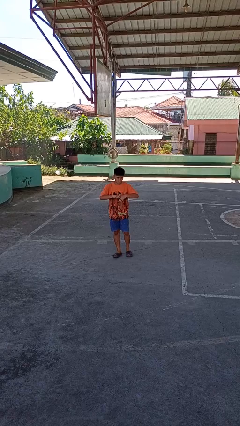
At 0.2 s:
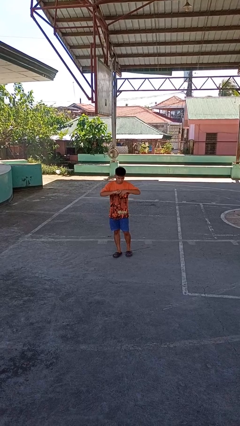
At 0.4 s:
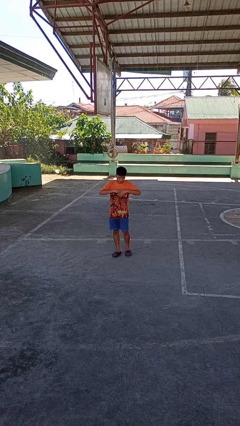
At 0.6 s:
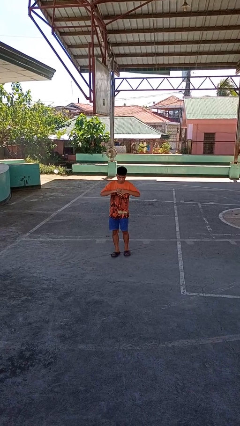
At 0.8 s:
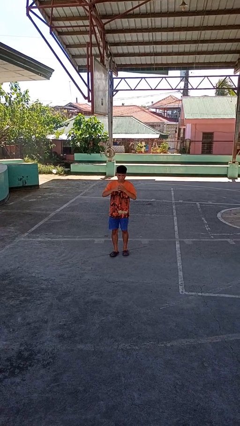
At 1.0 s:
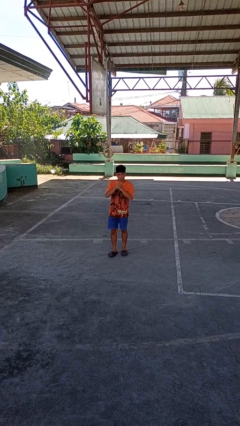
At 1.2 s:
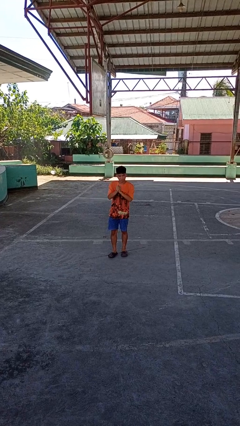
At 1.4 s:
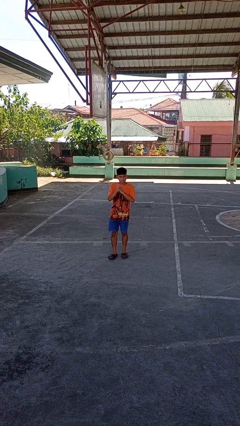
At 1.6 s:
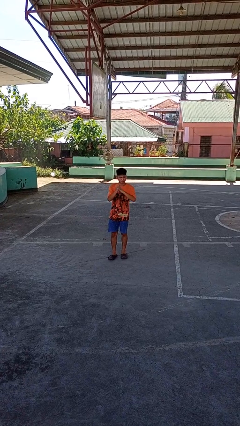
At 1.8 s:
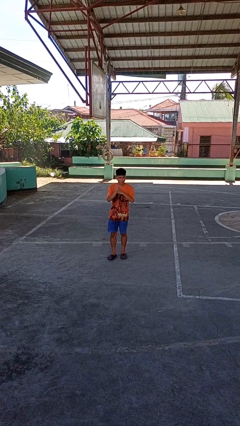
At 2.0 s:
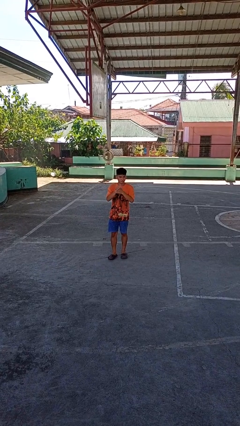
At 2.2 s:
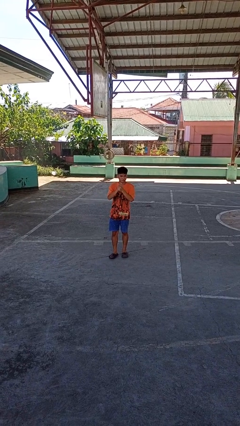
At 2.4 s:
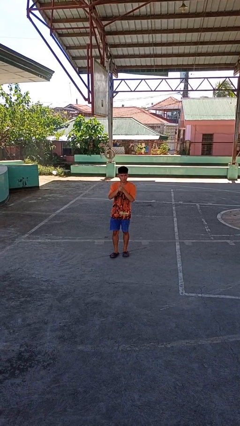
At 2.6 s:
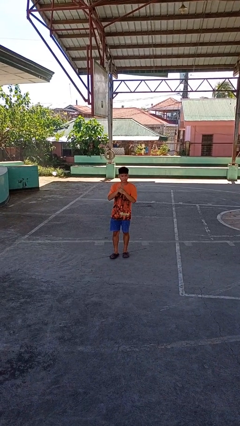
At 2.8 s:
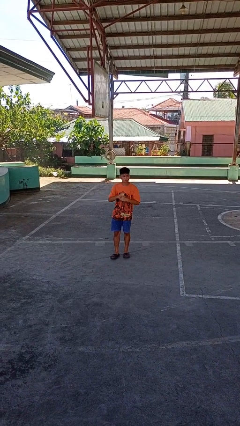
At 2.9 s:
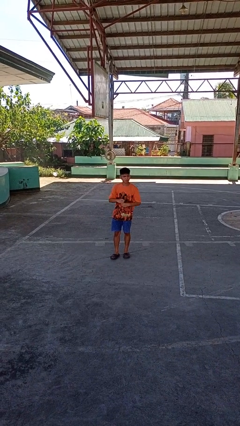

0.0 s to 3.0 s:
person cracks knuckles

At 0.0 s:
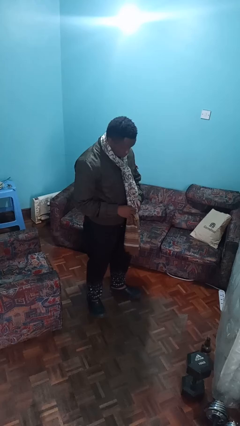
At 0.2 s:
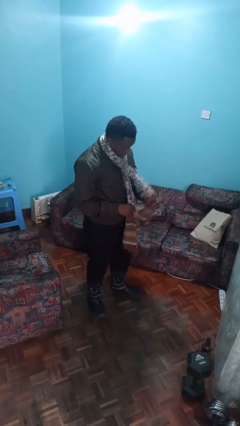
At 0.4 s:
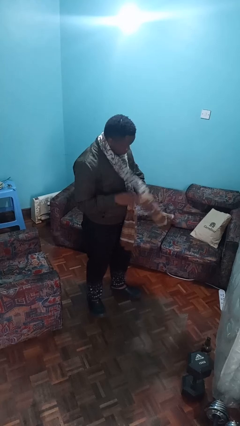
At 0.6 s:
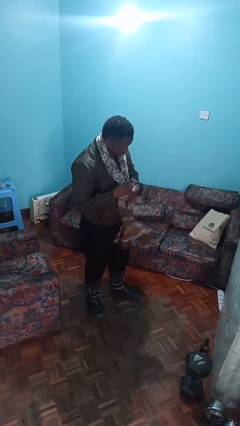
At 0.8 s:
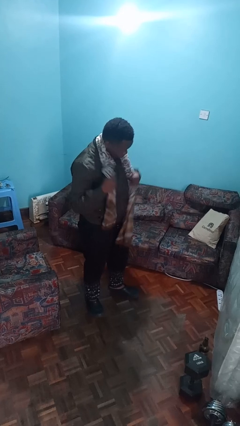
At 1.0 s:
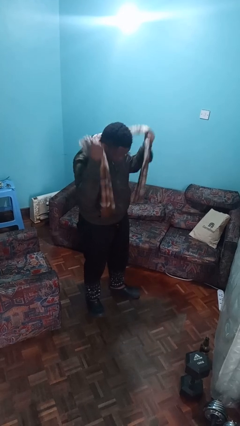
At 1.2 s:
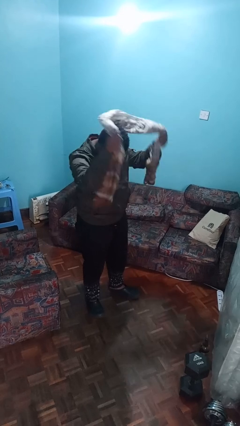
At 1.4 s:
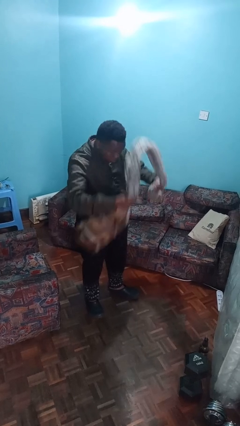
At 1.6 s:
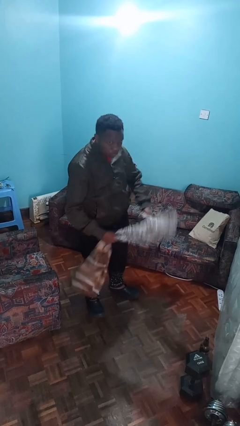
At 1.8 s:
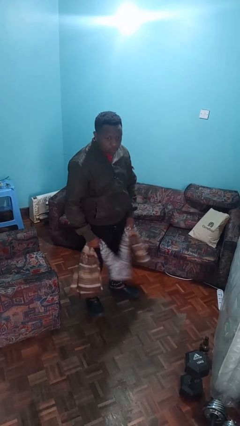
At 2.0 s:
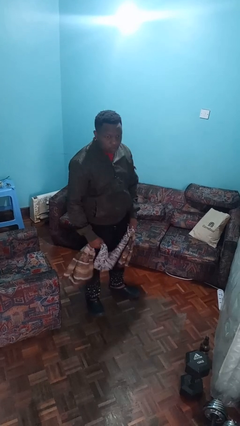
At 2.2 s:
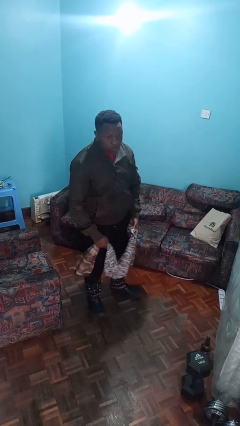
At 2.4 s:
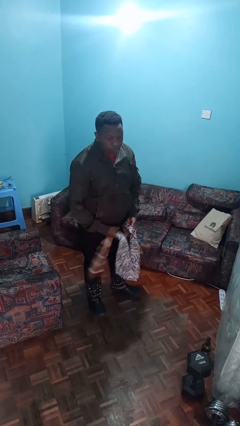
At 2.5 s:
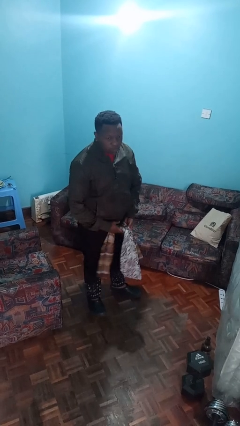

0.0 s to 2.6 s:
person takes off scarf

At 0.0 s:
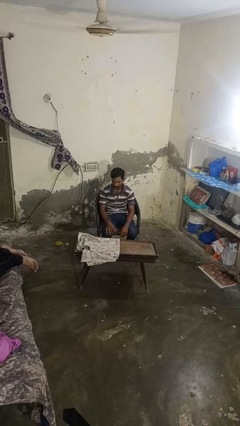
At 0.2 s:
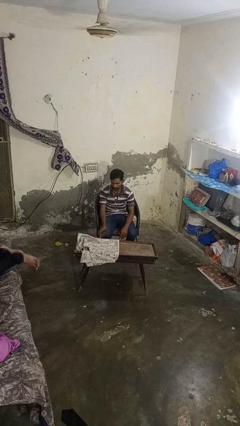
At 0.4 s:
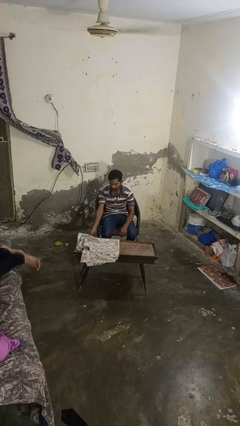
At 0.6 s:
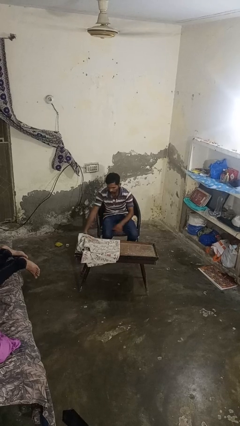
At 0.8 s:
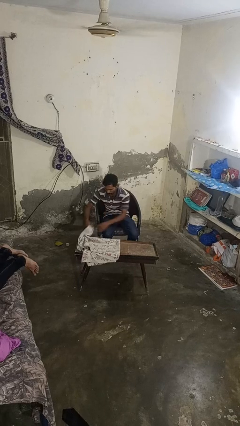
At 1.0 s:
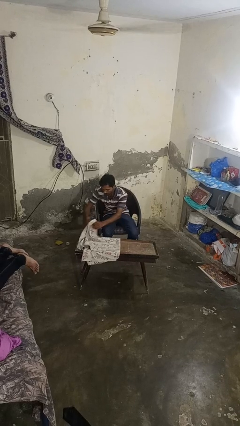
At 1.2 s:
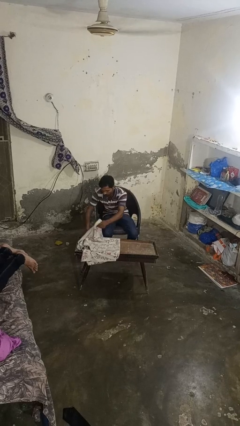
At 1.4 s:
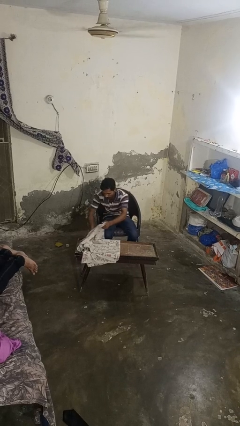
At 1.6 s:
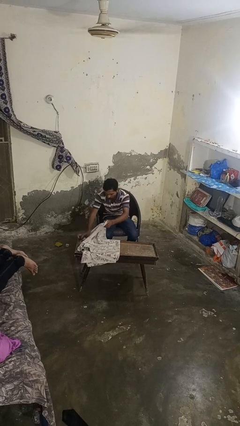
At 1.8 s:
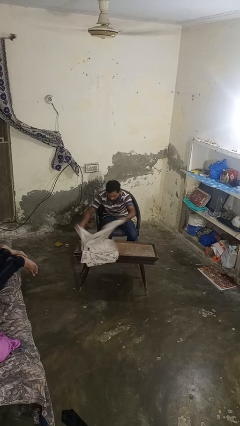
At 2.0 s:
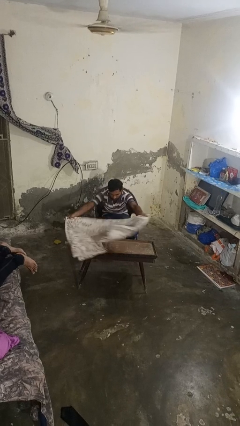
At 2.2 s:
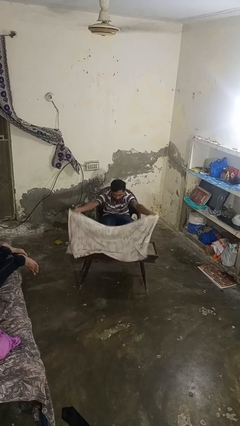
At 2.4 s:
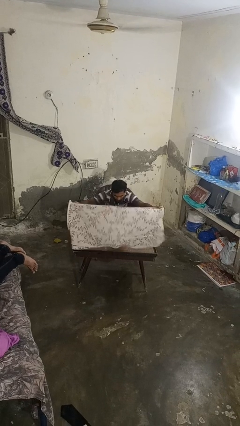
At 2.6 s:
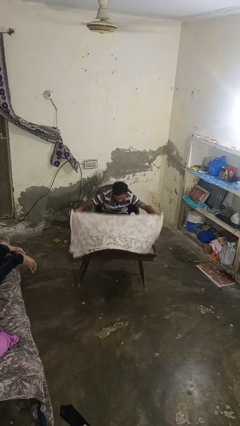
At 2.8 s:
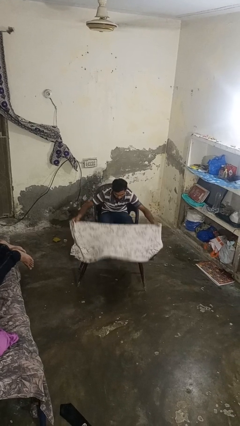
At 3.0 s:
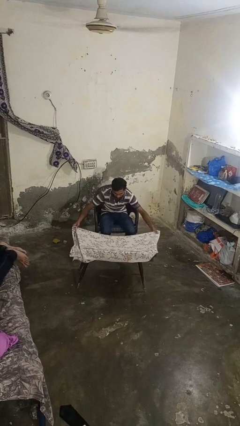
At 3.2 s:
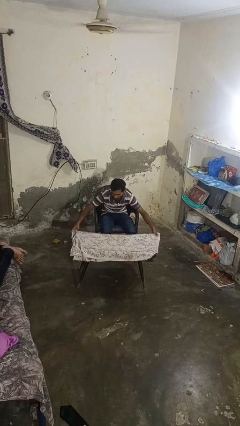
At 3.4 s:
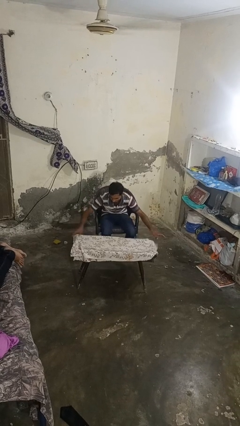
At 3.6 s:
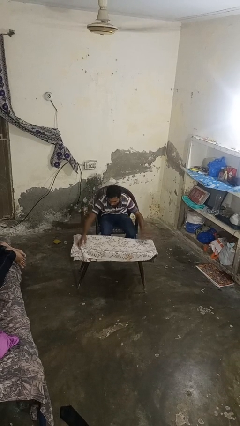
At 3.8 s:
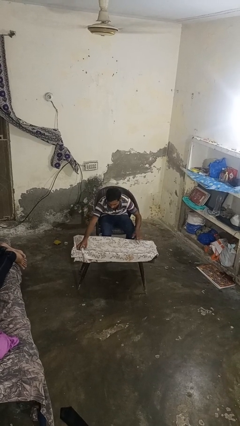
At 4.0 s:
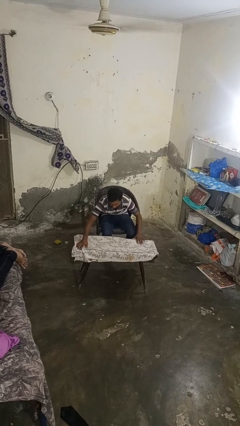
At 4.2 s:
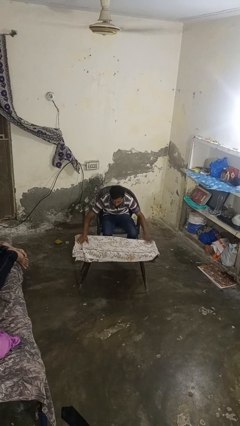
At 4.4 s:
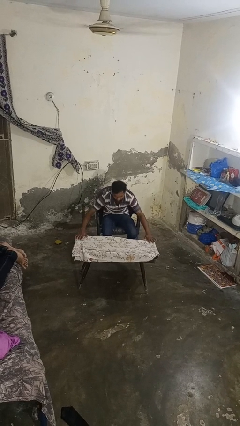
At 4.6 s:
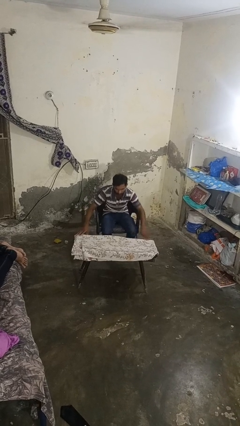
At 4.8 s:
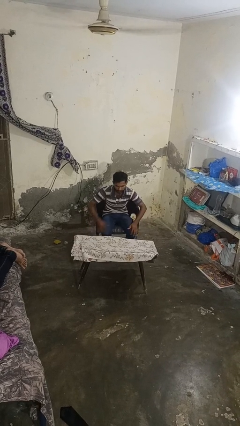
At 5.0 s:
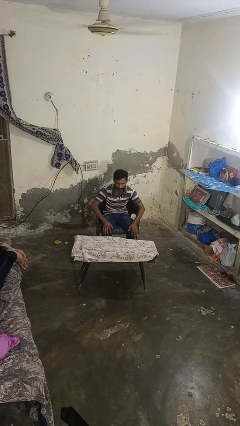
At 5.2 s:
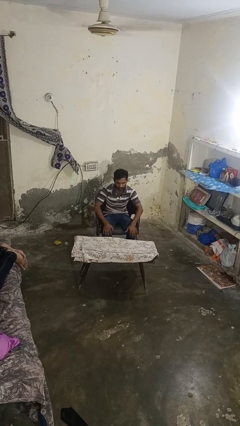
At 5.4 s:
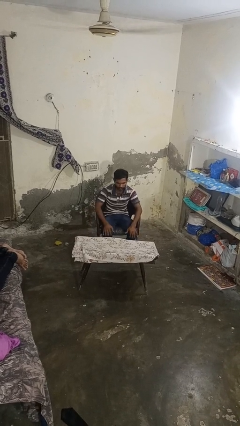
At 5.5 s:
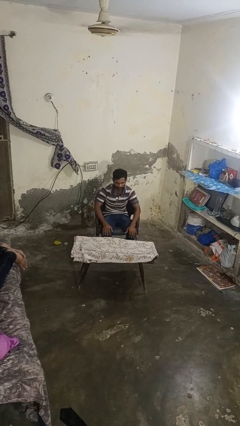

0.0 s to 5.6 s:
person spreads tablecloth

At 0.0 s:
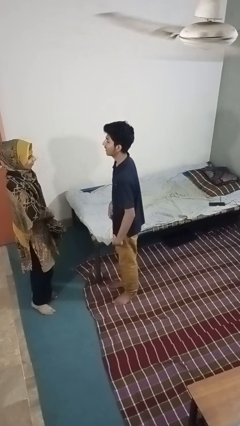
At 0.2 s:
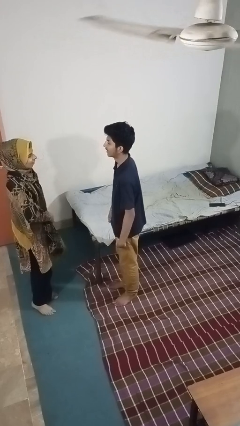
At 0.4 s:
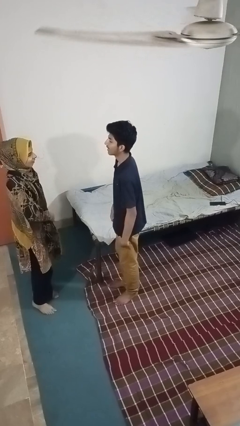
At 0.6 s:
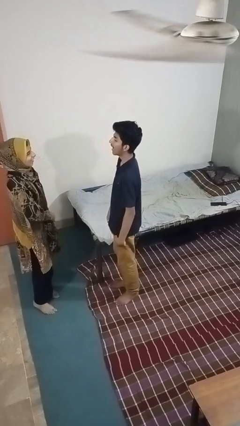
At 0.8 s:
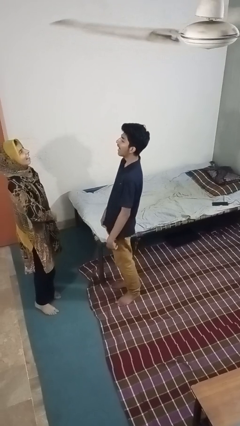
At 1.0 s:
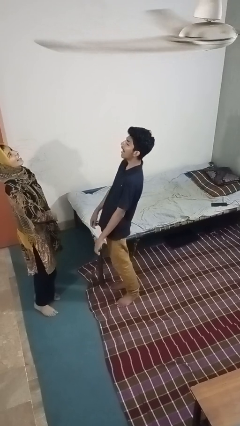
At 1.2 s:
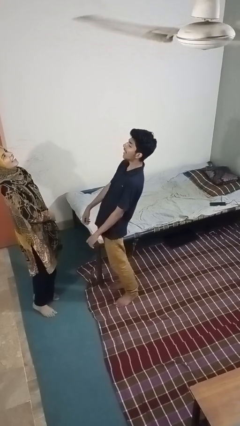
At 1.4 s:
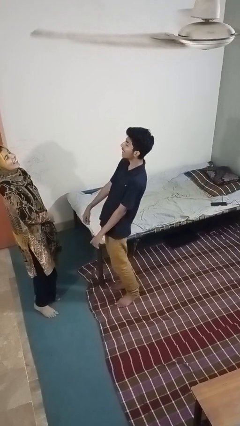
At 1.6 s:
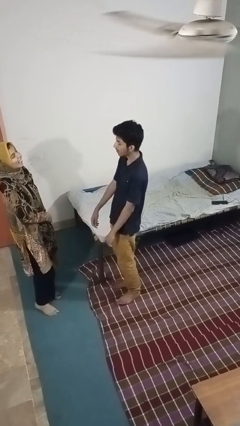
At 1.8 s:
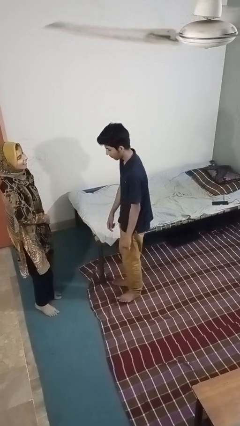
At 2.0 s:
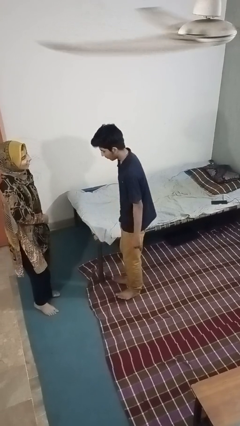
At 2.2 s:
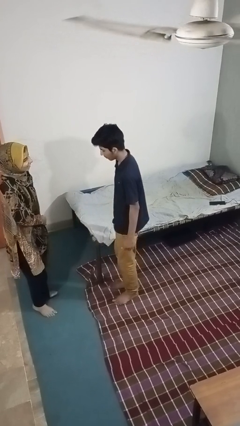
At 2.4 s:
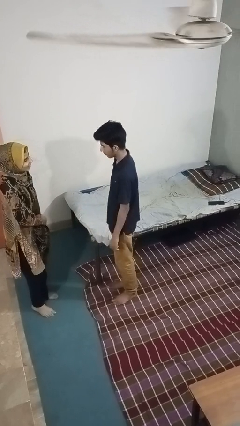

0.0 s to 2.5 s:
person laughs with person

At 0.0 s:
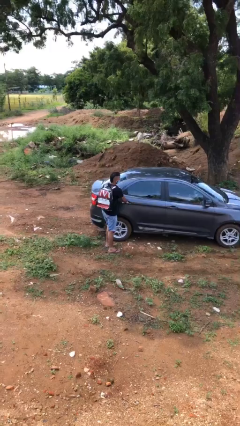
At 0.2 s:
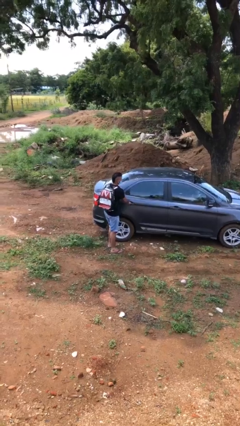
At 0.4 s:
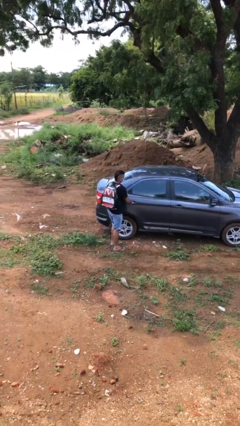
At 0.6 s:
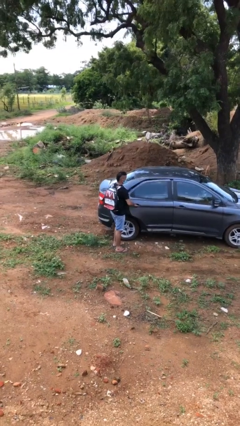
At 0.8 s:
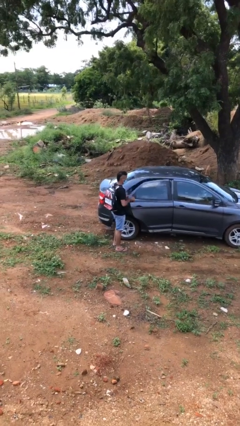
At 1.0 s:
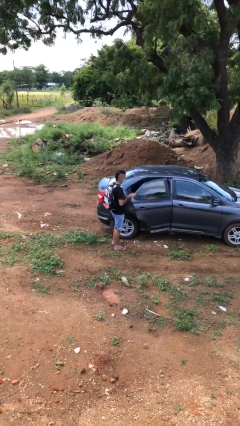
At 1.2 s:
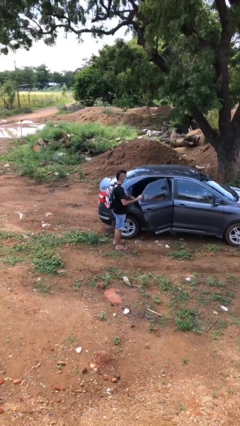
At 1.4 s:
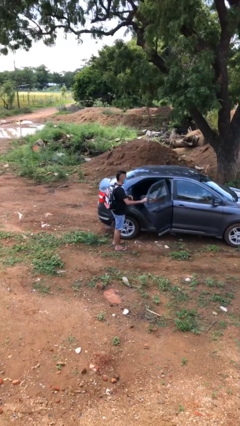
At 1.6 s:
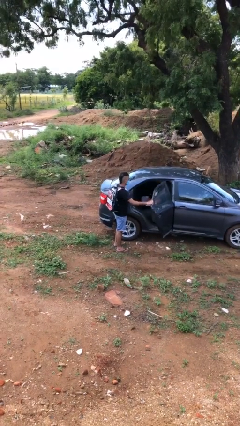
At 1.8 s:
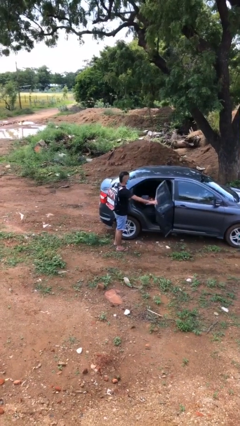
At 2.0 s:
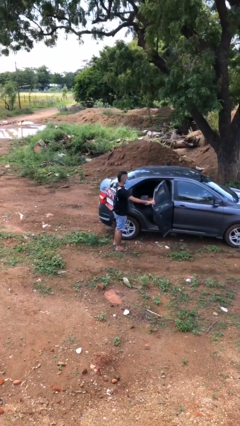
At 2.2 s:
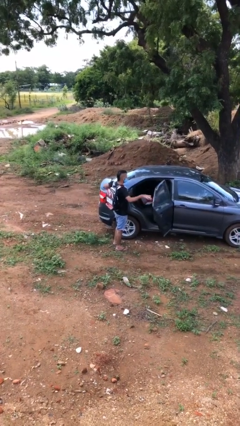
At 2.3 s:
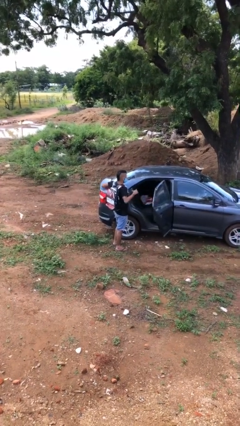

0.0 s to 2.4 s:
person opens car door

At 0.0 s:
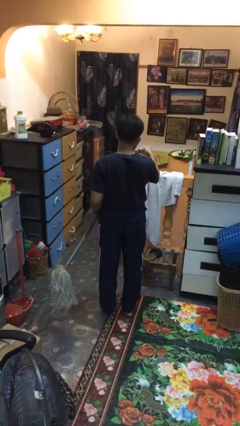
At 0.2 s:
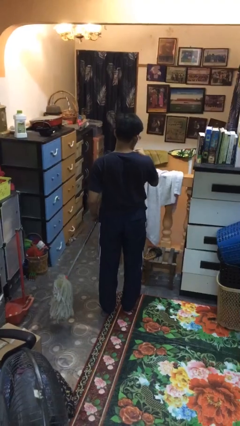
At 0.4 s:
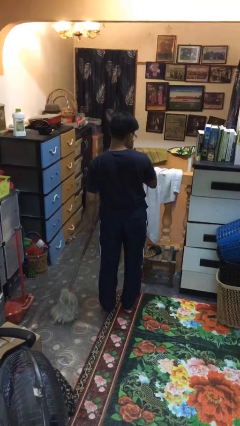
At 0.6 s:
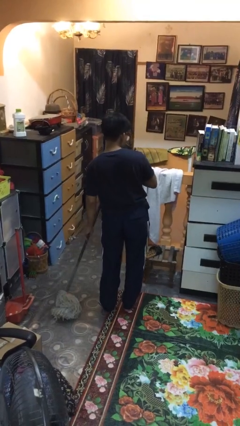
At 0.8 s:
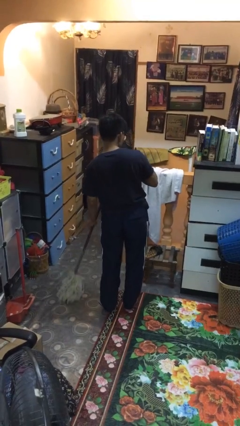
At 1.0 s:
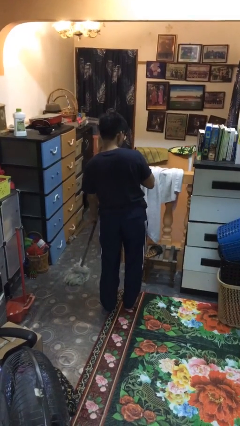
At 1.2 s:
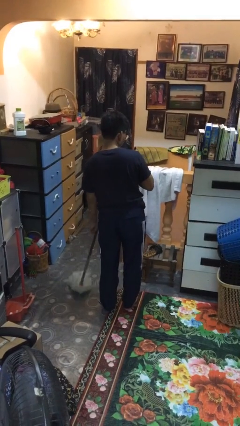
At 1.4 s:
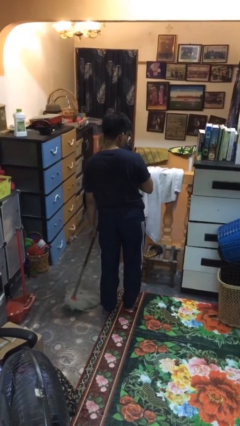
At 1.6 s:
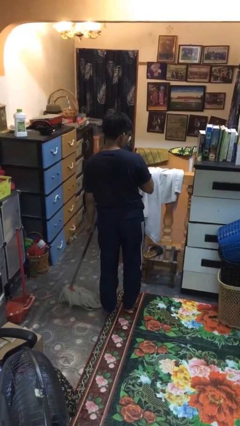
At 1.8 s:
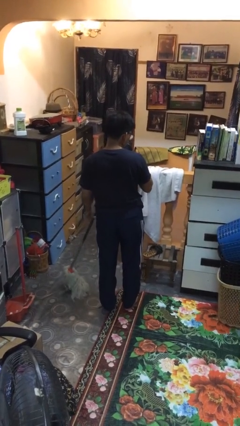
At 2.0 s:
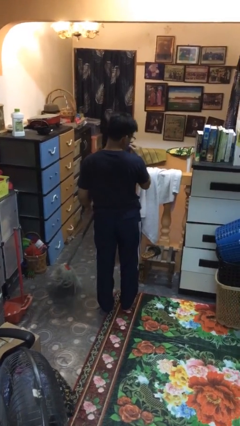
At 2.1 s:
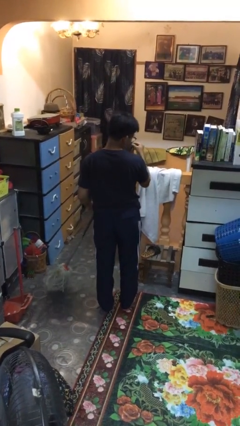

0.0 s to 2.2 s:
person mops
